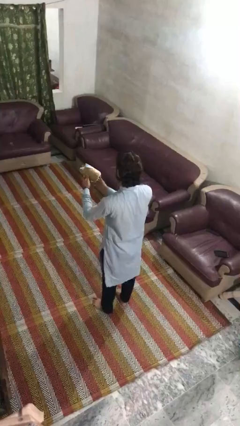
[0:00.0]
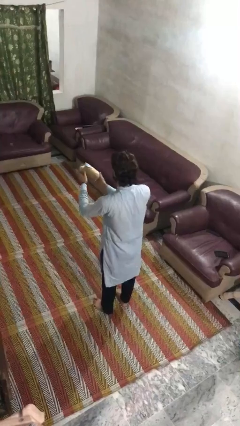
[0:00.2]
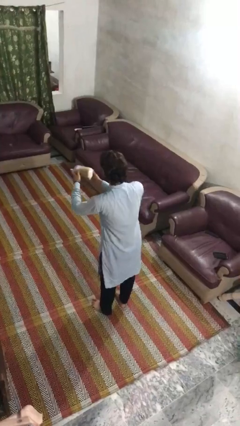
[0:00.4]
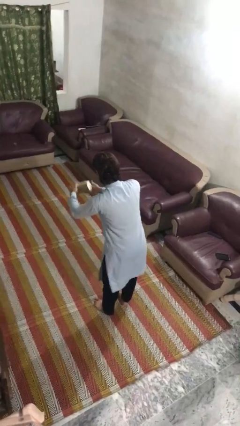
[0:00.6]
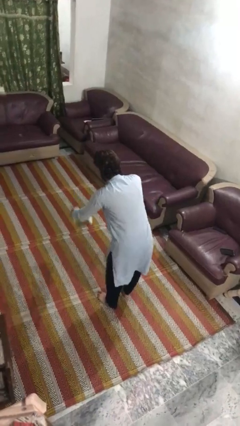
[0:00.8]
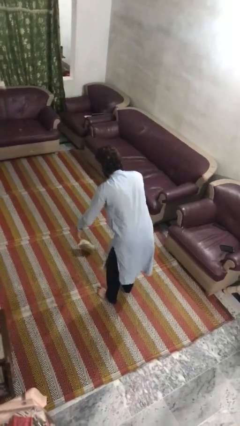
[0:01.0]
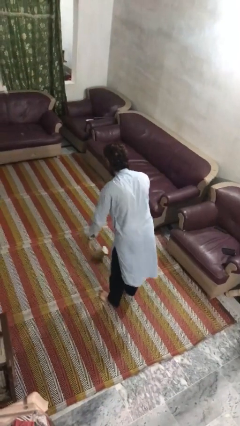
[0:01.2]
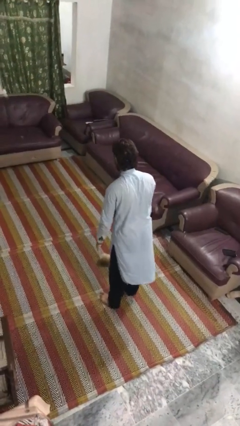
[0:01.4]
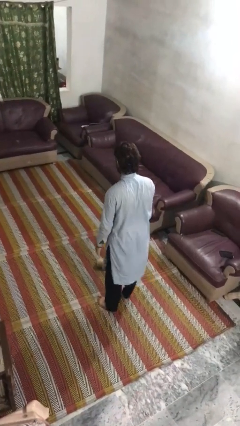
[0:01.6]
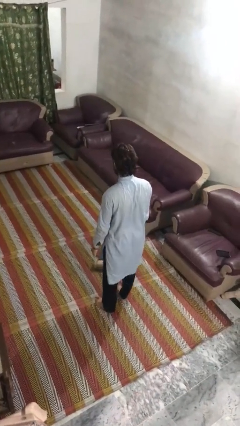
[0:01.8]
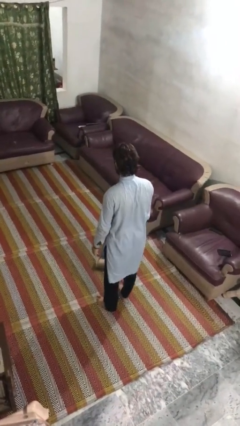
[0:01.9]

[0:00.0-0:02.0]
person drops object

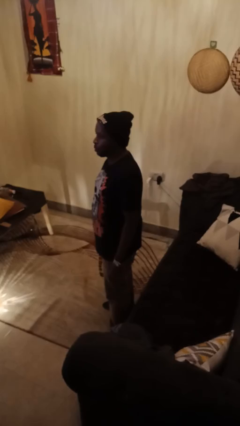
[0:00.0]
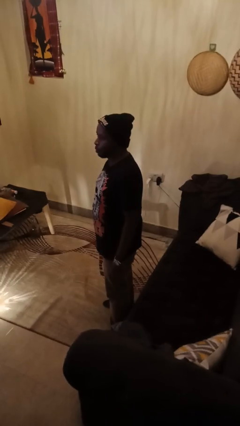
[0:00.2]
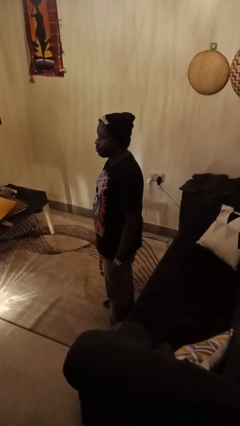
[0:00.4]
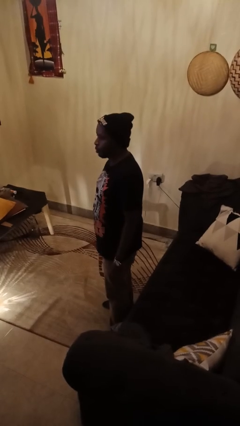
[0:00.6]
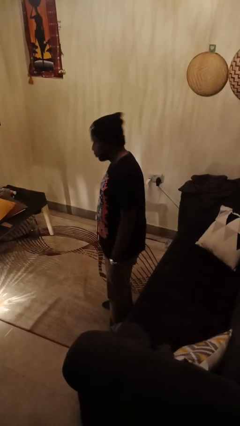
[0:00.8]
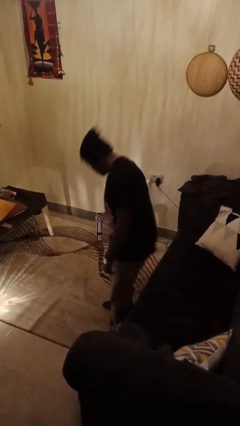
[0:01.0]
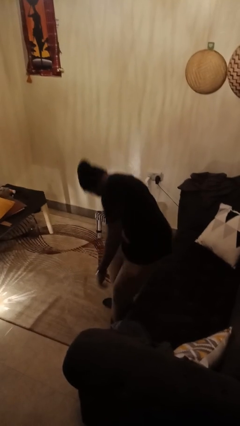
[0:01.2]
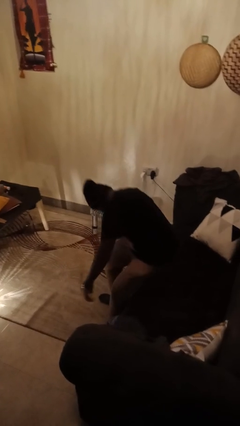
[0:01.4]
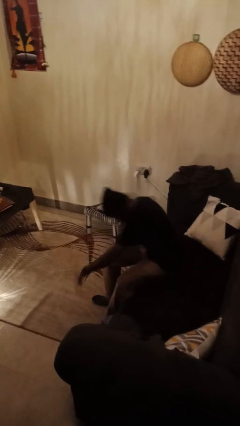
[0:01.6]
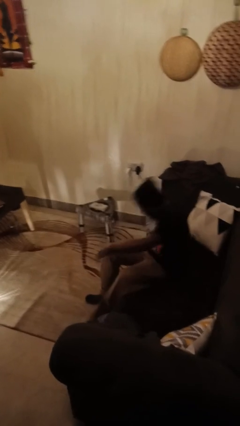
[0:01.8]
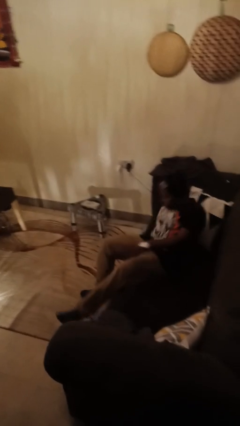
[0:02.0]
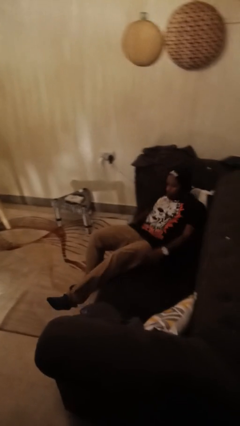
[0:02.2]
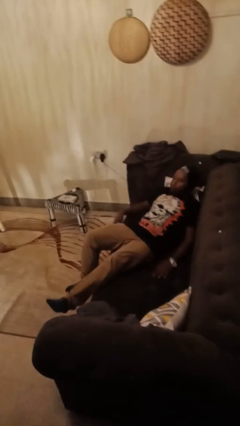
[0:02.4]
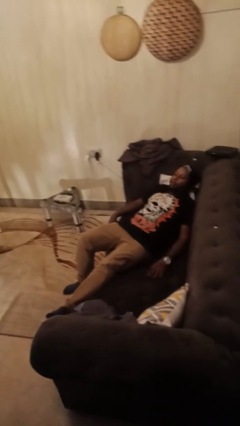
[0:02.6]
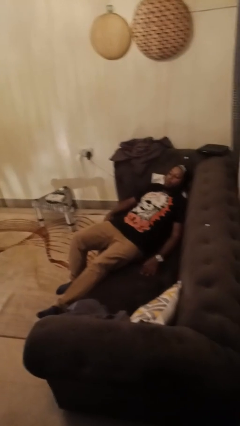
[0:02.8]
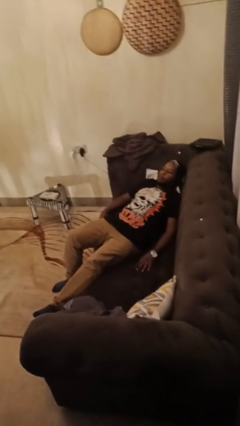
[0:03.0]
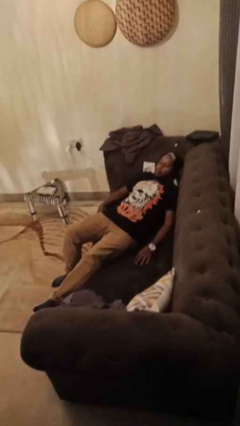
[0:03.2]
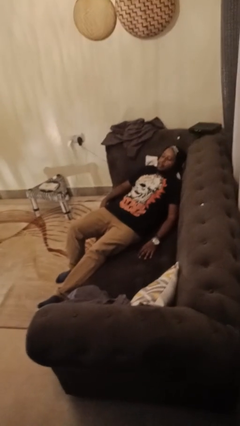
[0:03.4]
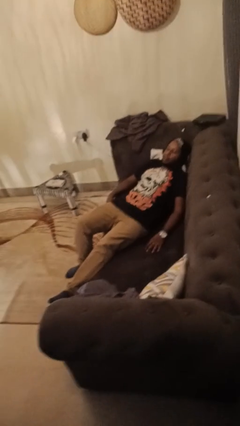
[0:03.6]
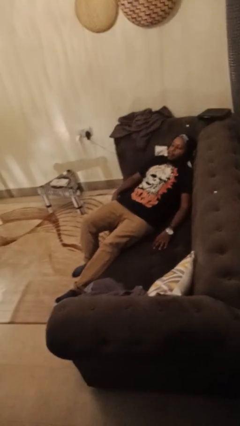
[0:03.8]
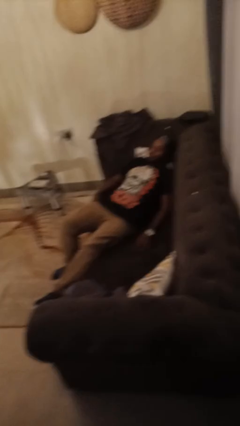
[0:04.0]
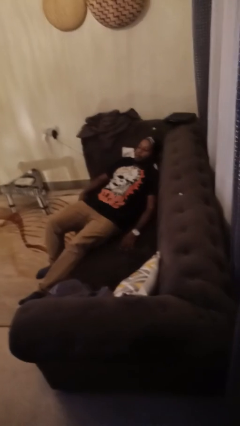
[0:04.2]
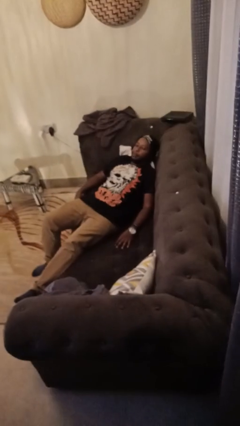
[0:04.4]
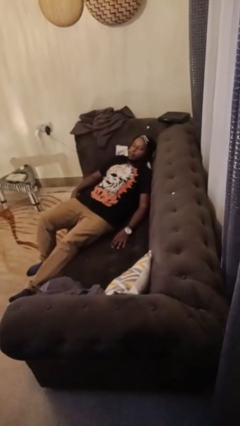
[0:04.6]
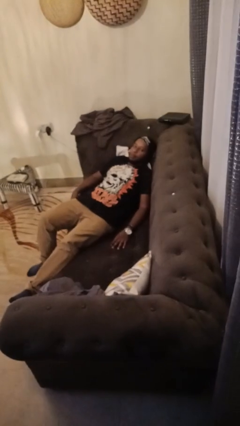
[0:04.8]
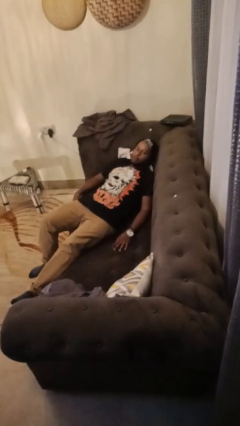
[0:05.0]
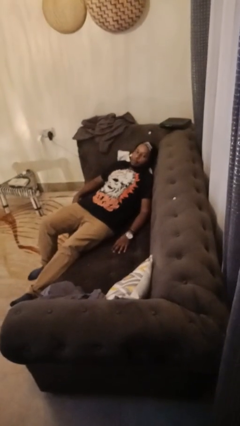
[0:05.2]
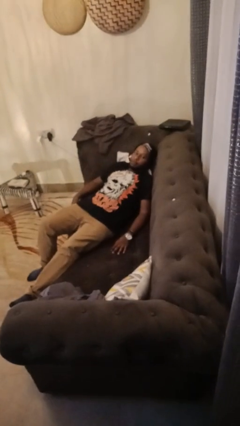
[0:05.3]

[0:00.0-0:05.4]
person lies down on couch

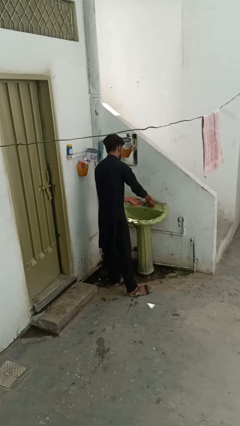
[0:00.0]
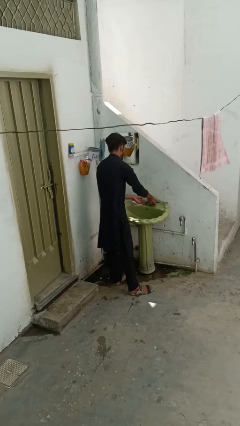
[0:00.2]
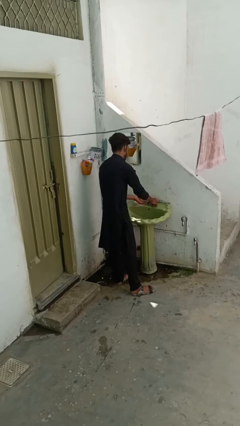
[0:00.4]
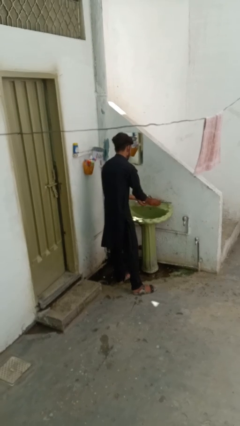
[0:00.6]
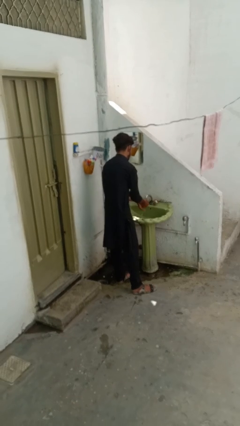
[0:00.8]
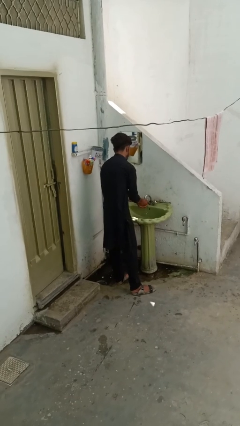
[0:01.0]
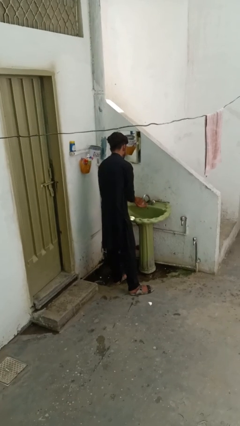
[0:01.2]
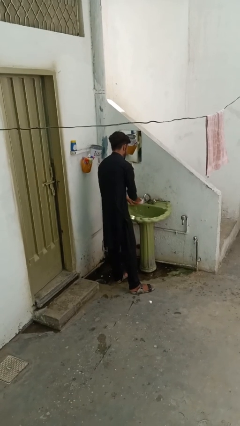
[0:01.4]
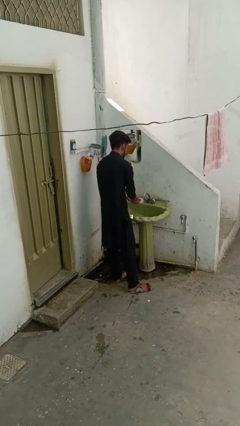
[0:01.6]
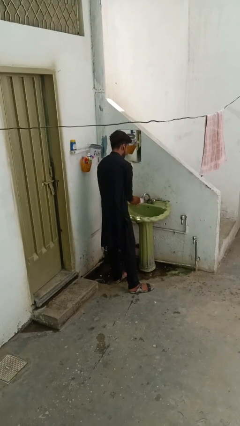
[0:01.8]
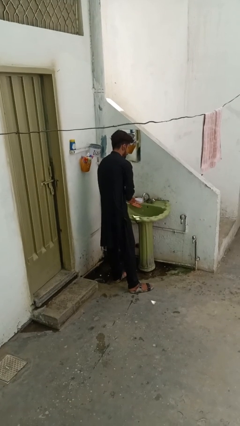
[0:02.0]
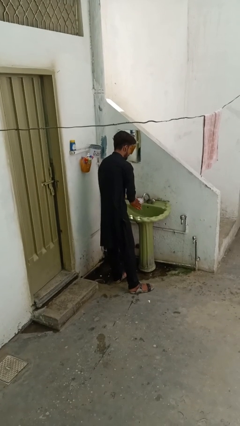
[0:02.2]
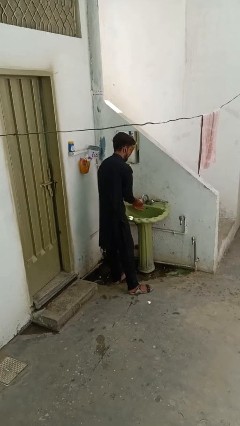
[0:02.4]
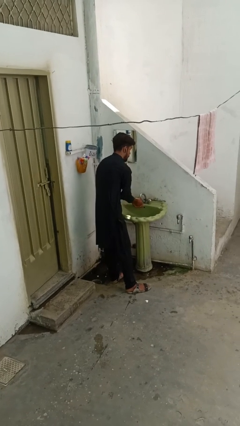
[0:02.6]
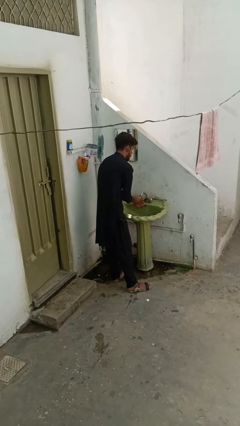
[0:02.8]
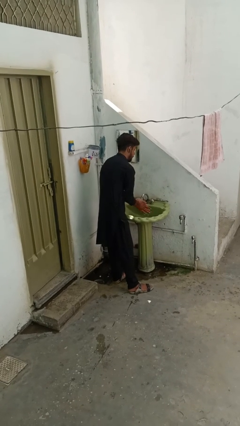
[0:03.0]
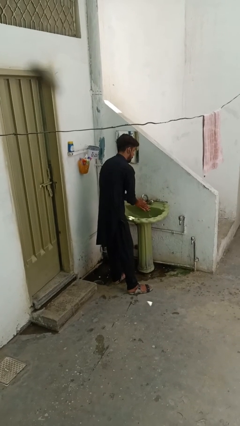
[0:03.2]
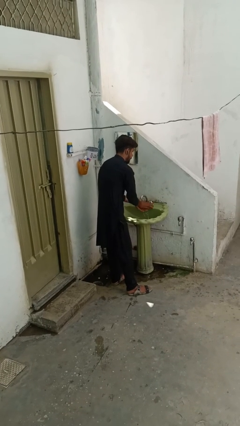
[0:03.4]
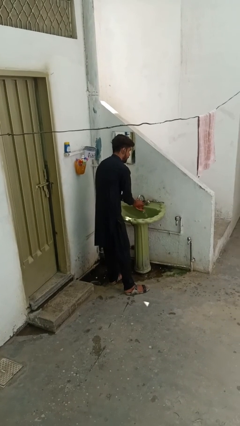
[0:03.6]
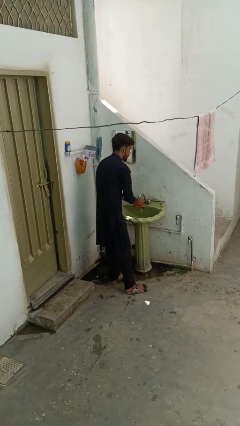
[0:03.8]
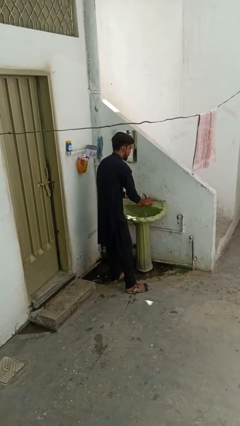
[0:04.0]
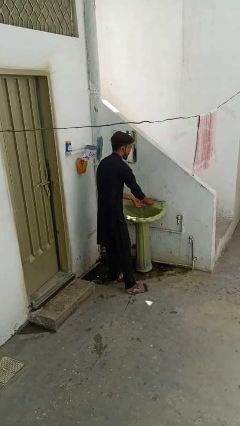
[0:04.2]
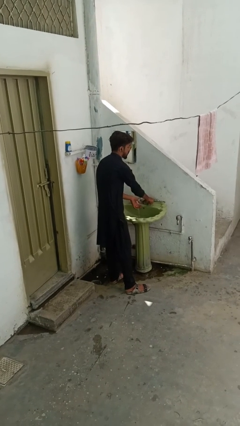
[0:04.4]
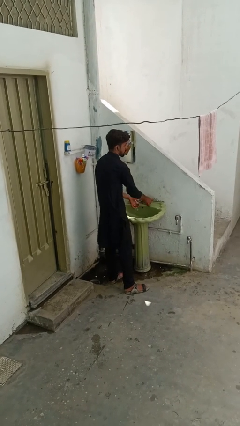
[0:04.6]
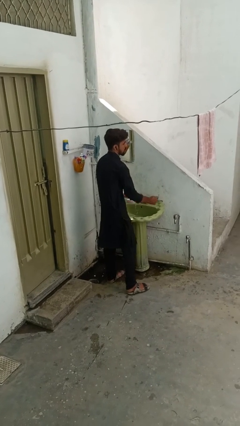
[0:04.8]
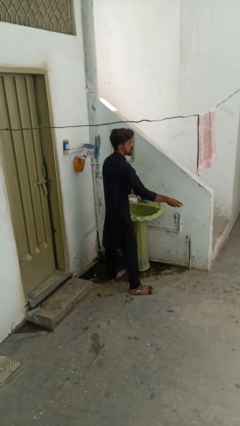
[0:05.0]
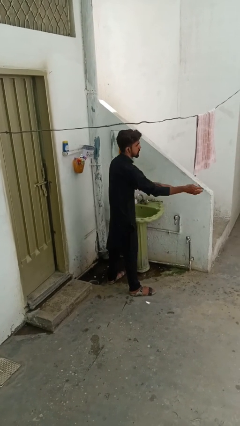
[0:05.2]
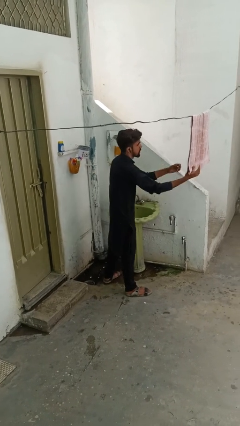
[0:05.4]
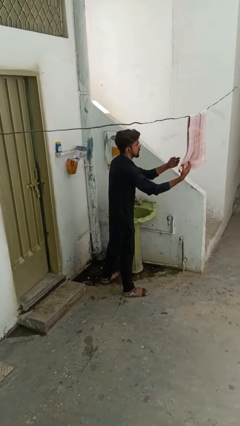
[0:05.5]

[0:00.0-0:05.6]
person washes hands

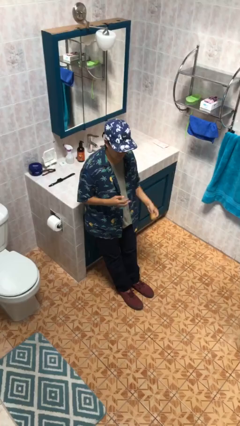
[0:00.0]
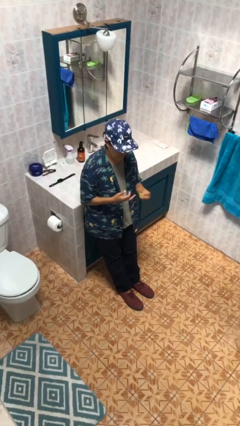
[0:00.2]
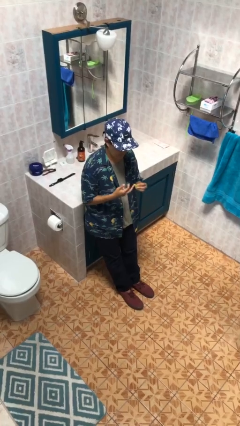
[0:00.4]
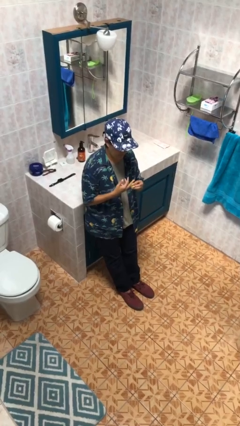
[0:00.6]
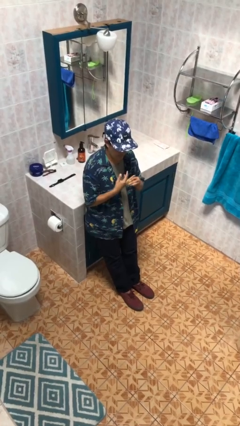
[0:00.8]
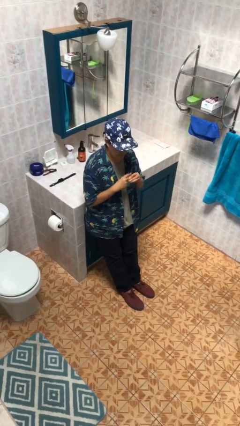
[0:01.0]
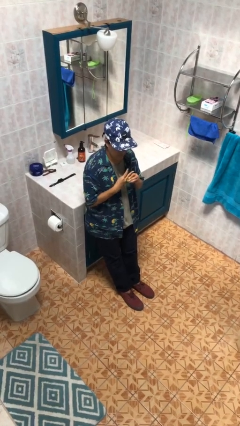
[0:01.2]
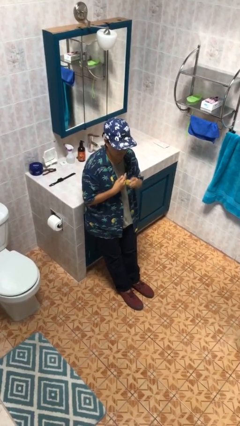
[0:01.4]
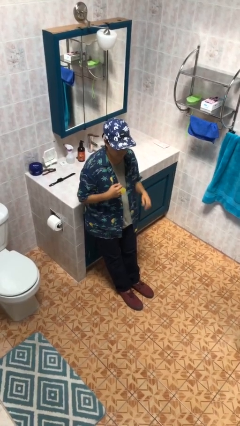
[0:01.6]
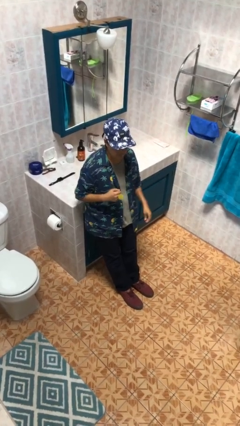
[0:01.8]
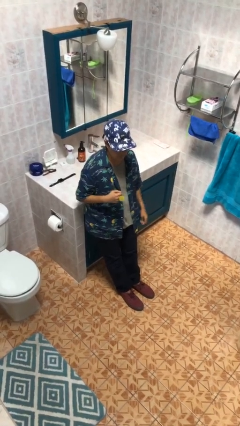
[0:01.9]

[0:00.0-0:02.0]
person puts on ring

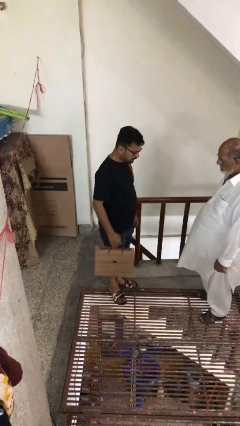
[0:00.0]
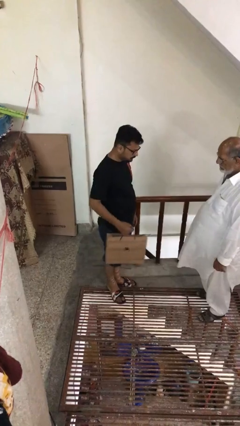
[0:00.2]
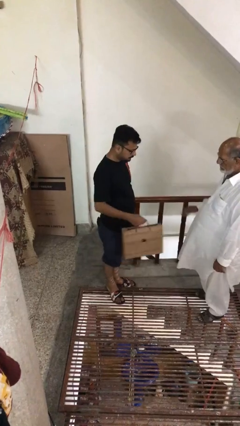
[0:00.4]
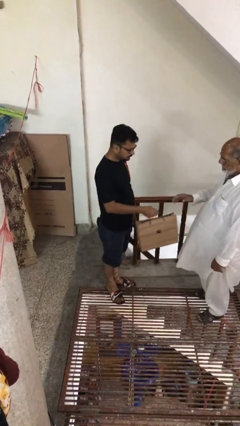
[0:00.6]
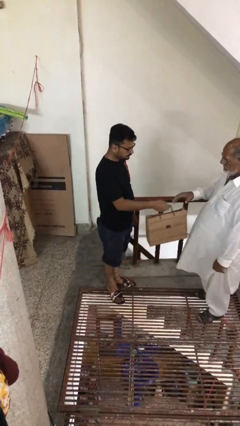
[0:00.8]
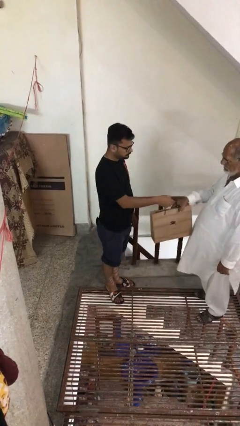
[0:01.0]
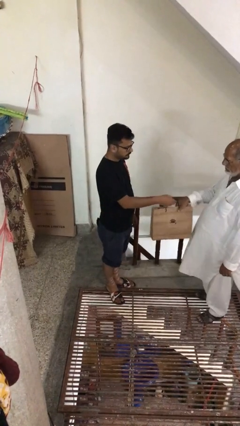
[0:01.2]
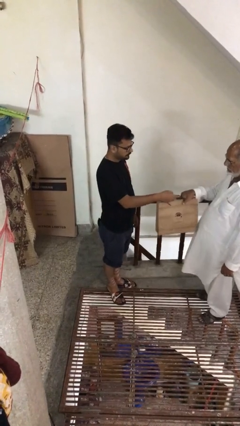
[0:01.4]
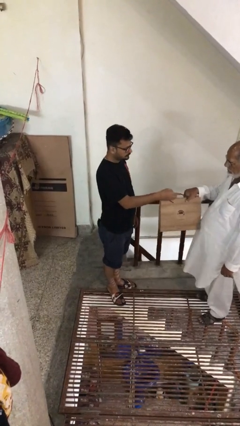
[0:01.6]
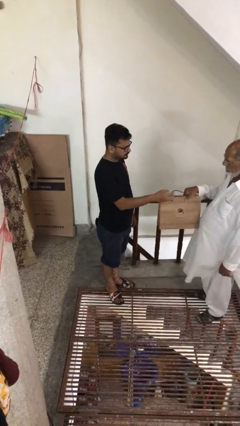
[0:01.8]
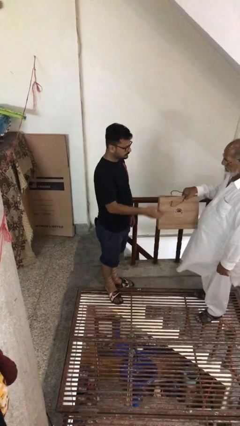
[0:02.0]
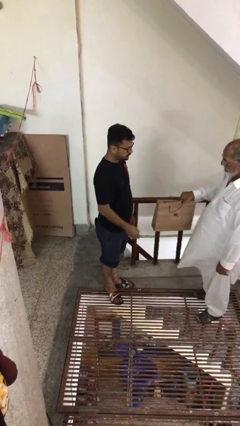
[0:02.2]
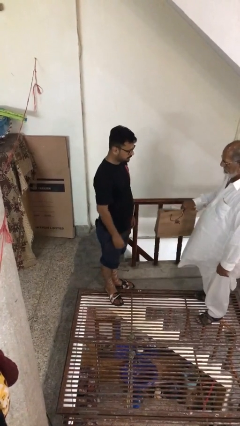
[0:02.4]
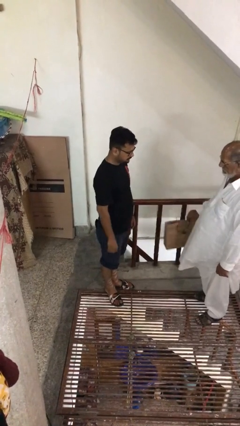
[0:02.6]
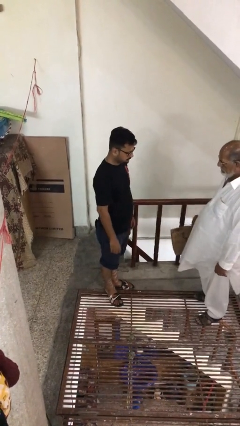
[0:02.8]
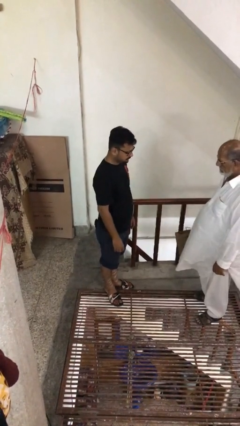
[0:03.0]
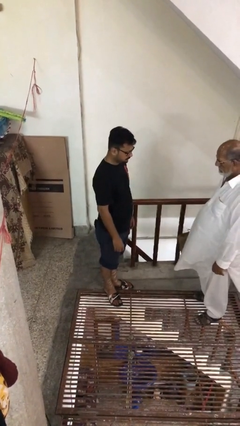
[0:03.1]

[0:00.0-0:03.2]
person transfers object to person
